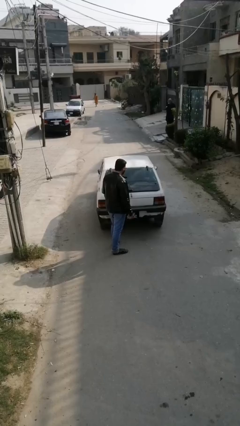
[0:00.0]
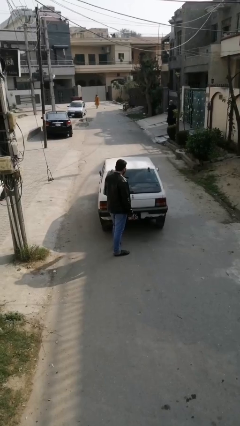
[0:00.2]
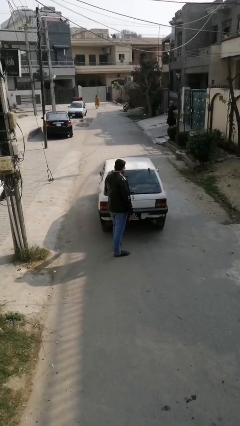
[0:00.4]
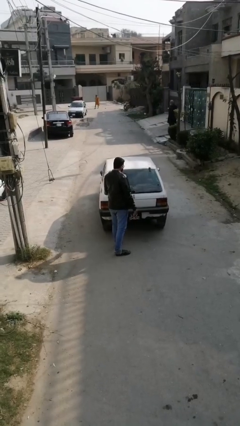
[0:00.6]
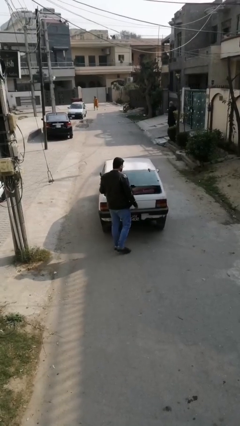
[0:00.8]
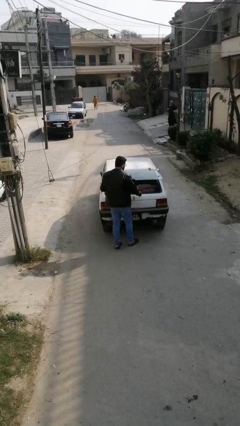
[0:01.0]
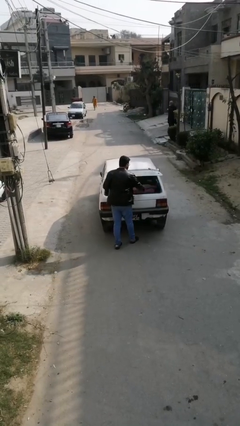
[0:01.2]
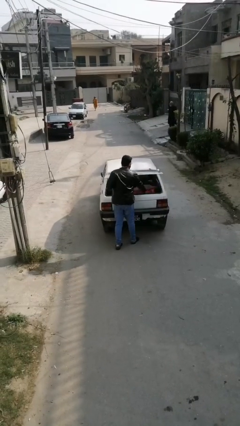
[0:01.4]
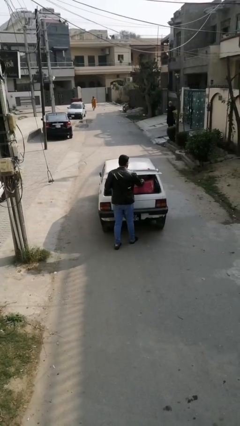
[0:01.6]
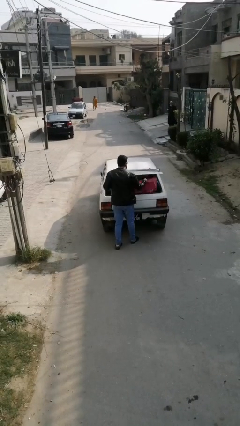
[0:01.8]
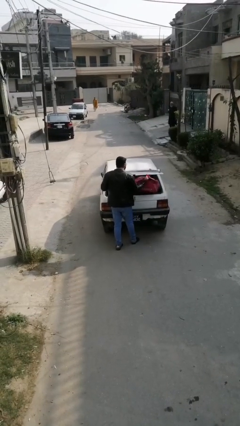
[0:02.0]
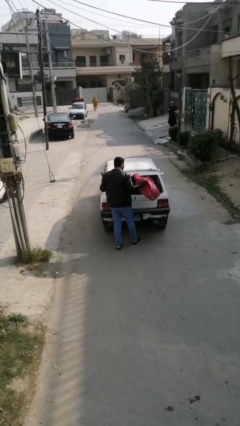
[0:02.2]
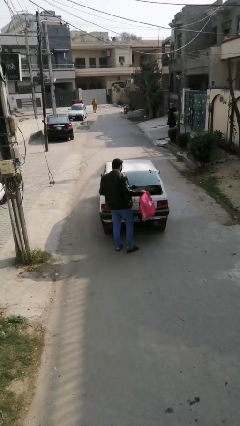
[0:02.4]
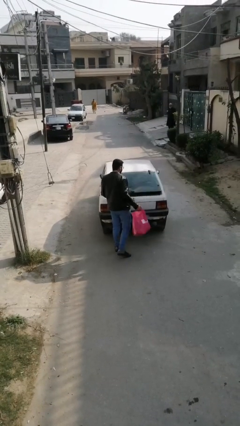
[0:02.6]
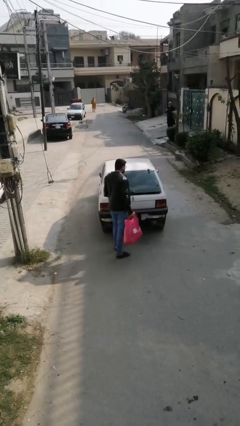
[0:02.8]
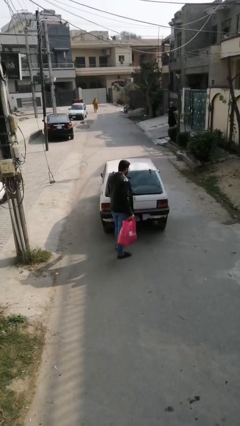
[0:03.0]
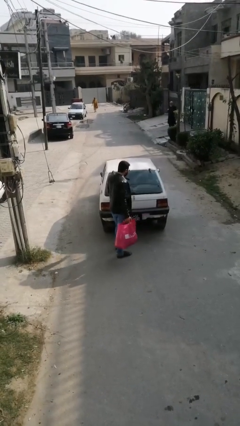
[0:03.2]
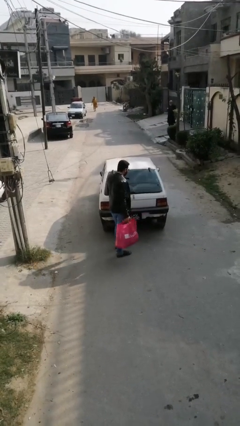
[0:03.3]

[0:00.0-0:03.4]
person unloads car

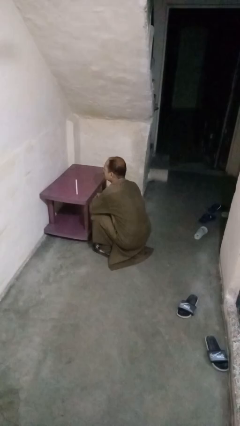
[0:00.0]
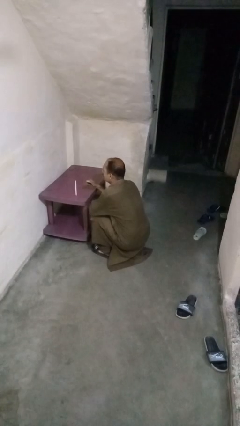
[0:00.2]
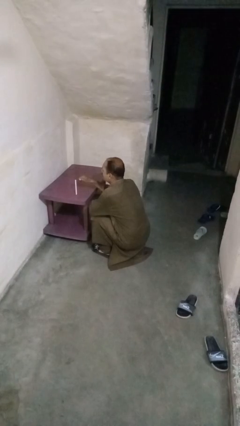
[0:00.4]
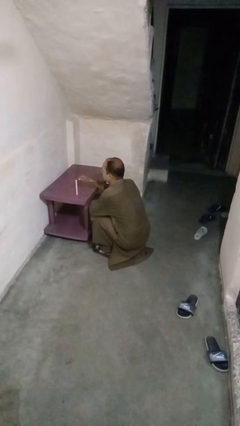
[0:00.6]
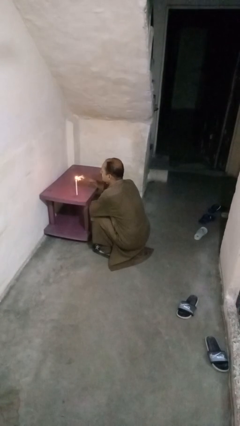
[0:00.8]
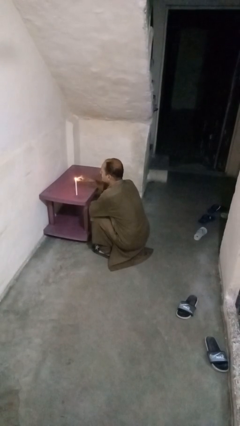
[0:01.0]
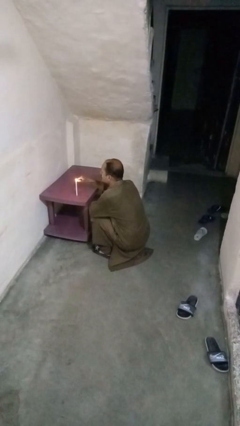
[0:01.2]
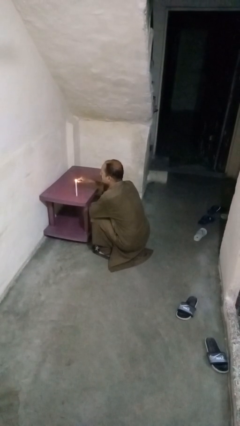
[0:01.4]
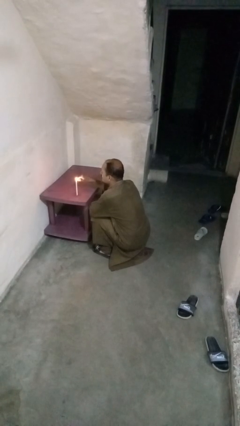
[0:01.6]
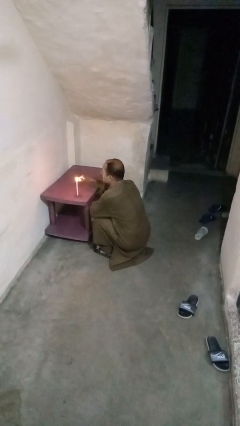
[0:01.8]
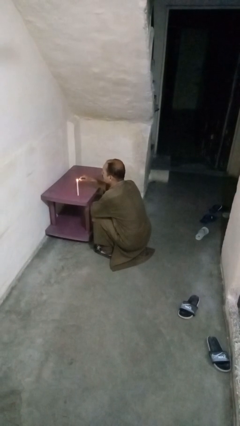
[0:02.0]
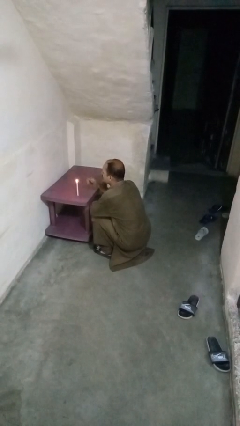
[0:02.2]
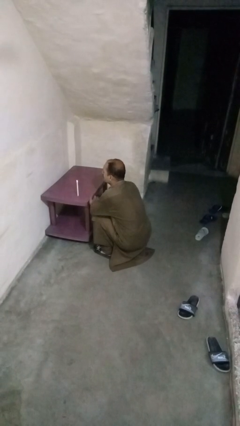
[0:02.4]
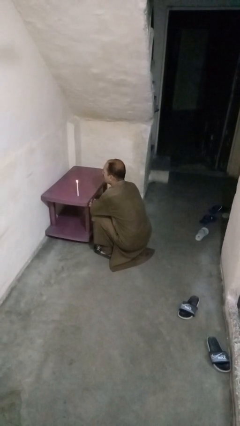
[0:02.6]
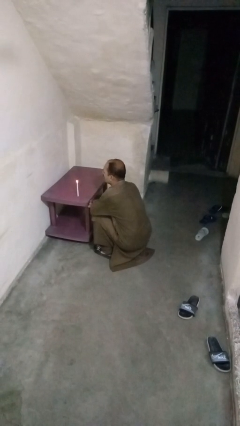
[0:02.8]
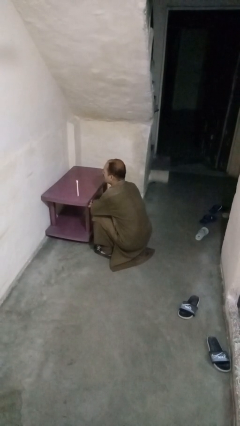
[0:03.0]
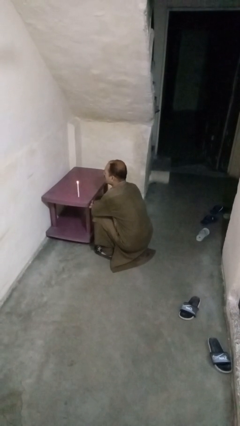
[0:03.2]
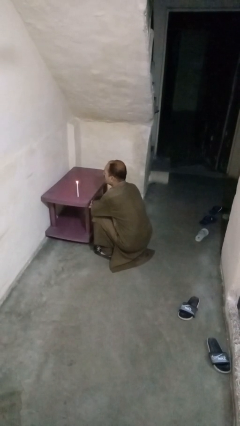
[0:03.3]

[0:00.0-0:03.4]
person lights candle

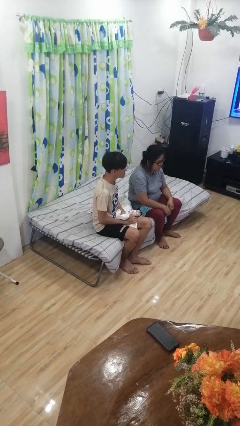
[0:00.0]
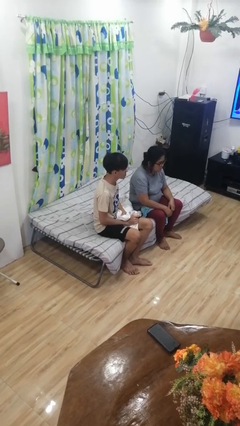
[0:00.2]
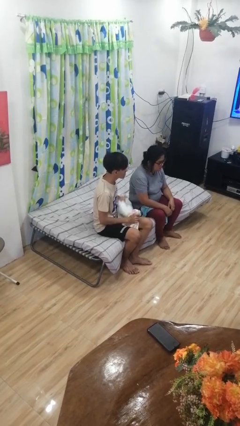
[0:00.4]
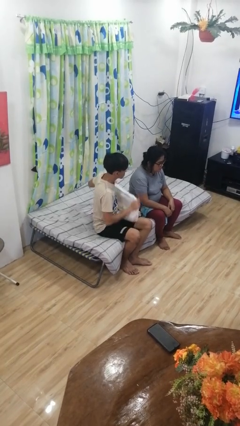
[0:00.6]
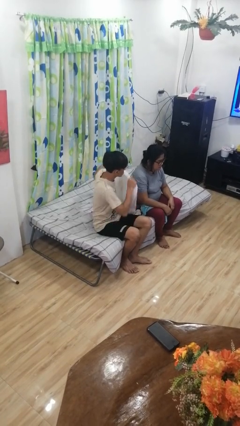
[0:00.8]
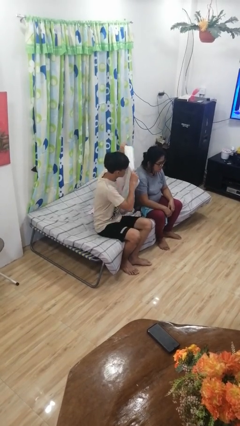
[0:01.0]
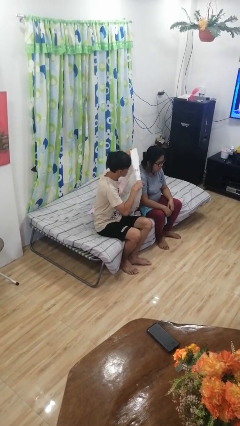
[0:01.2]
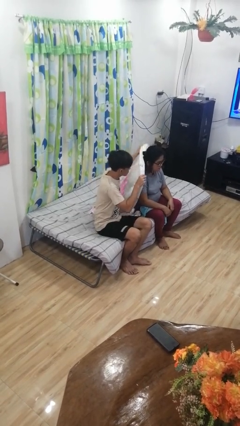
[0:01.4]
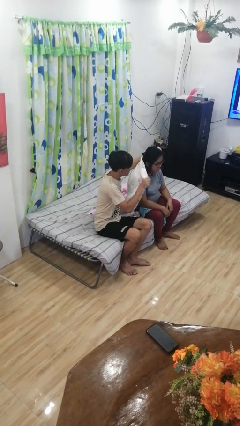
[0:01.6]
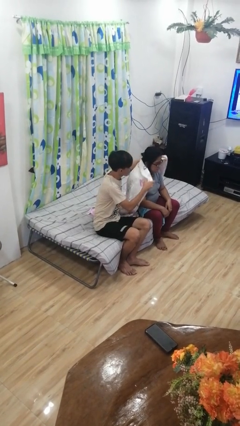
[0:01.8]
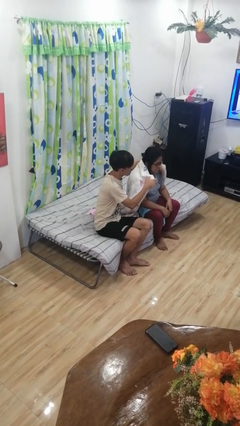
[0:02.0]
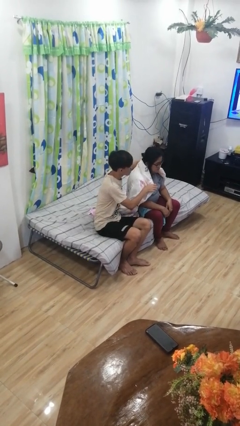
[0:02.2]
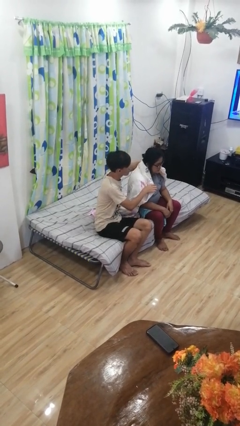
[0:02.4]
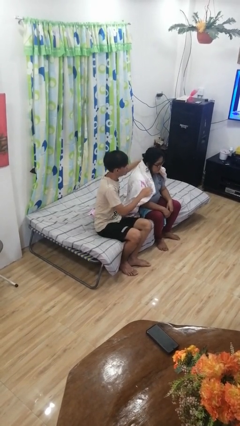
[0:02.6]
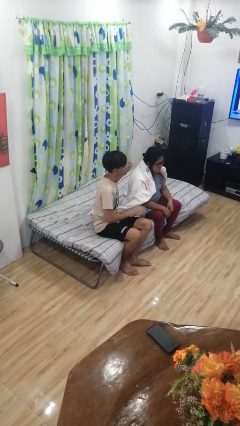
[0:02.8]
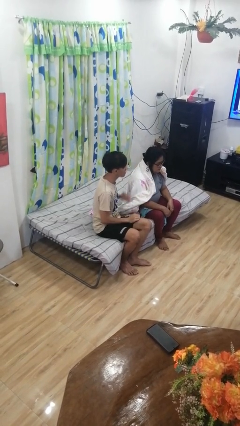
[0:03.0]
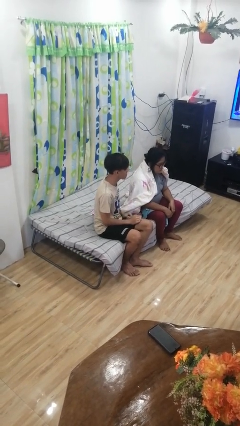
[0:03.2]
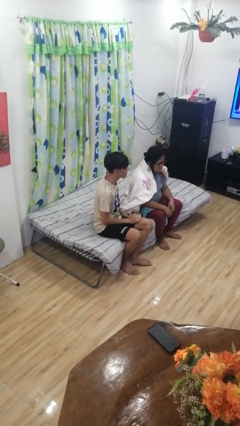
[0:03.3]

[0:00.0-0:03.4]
person covers friend with blanket

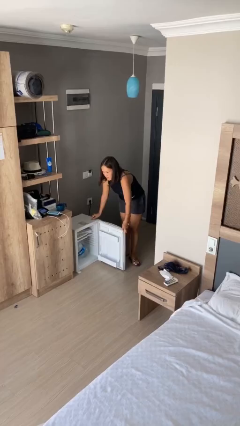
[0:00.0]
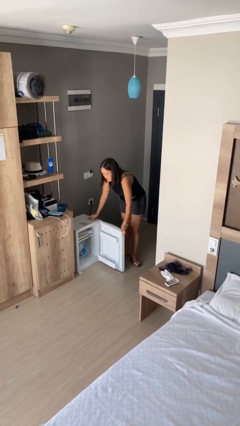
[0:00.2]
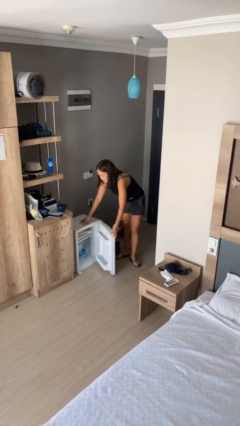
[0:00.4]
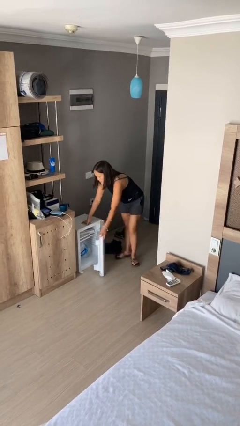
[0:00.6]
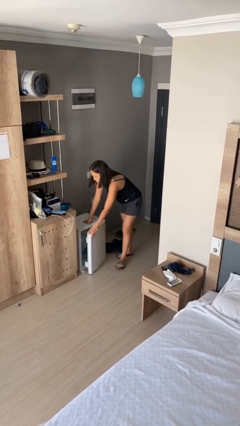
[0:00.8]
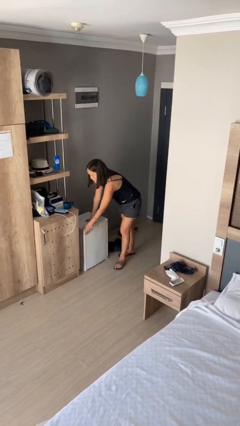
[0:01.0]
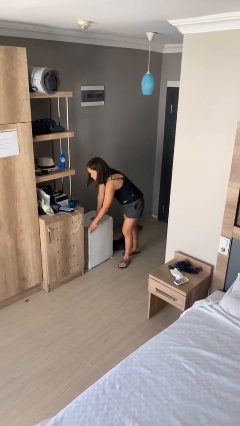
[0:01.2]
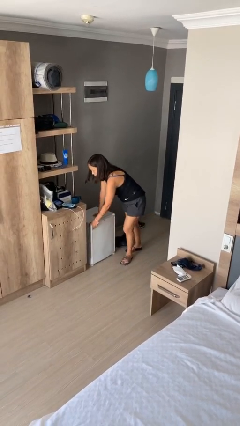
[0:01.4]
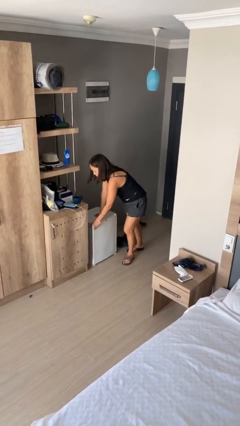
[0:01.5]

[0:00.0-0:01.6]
person closes refrigerator

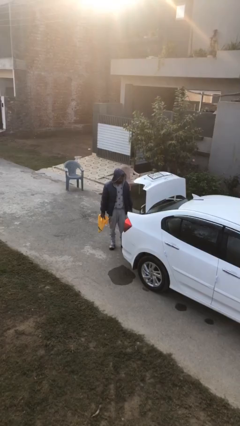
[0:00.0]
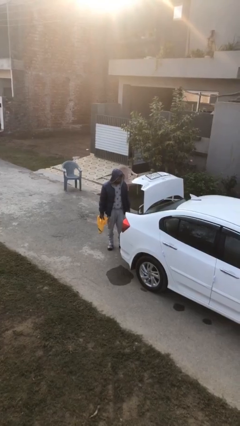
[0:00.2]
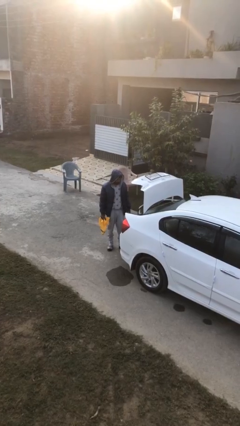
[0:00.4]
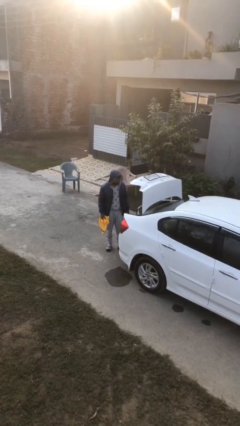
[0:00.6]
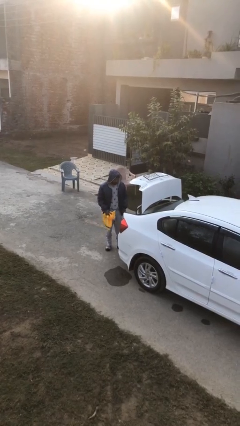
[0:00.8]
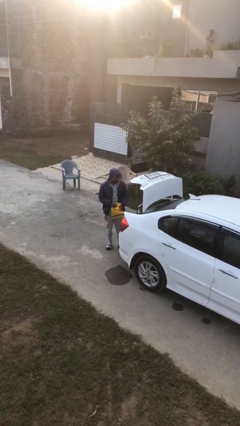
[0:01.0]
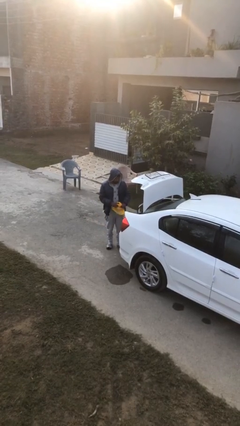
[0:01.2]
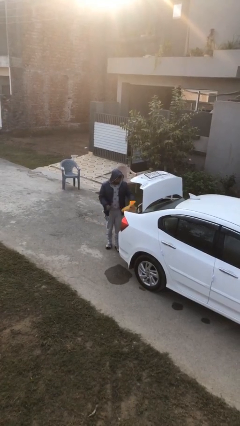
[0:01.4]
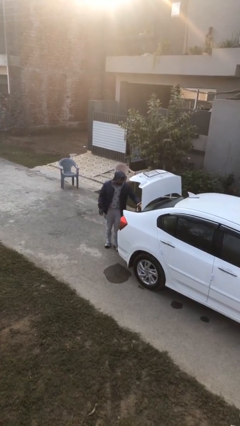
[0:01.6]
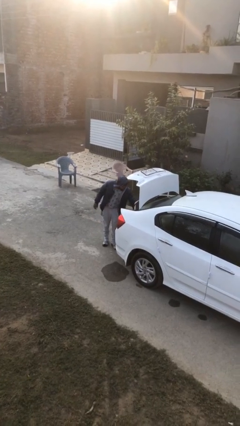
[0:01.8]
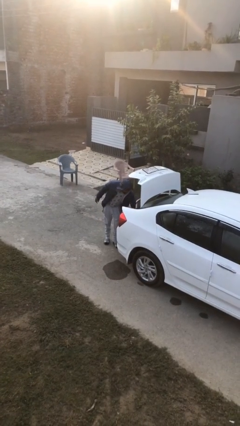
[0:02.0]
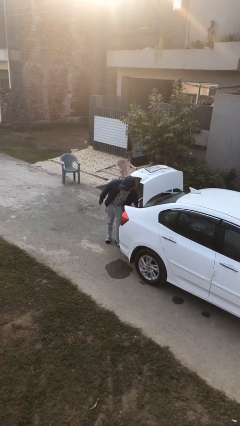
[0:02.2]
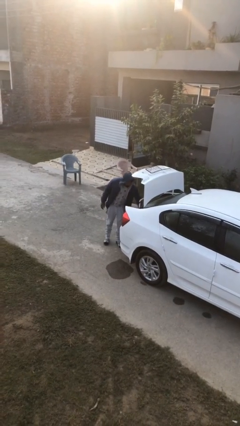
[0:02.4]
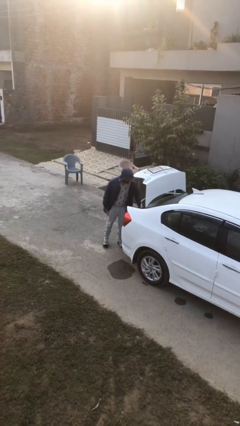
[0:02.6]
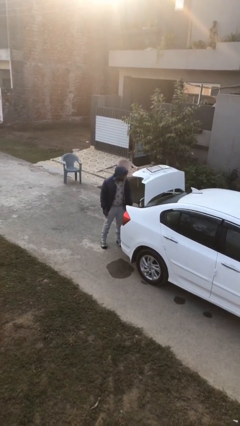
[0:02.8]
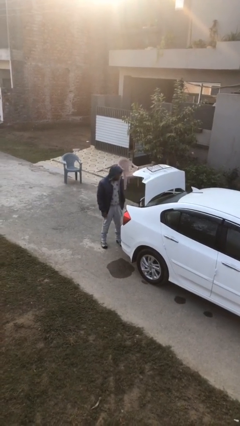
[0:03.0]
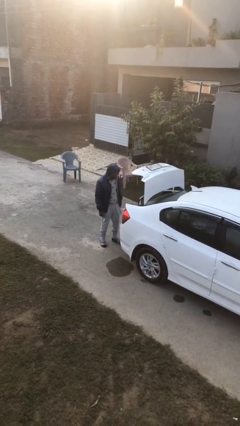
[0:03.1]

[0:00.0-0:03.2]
person loads car

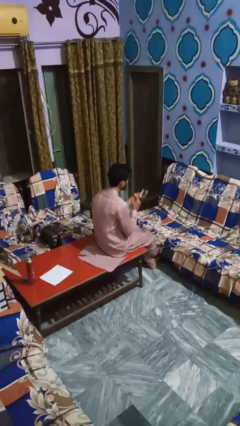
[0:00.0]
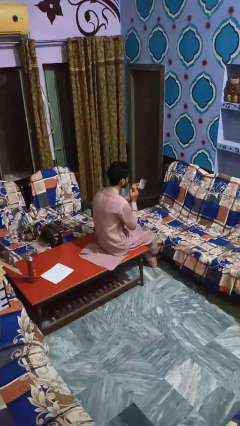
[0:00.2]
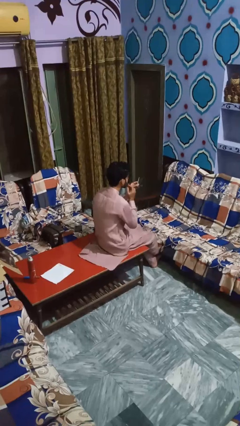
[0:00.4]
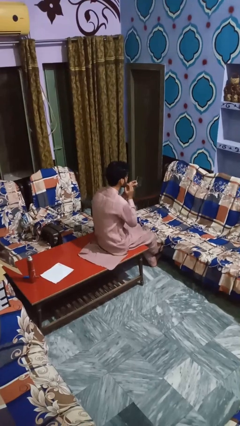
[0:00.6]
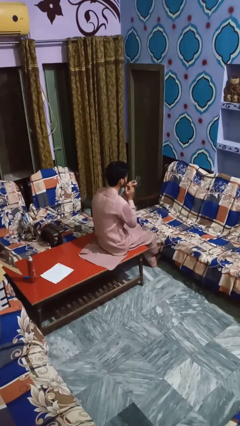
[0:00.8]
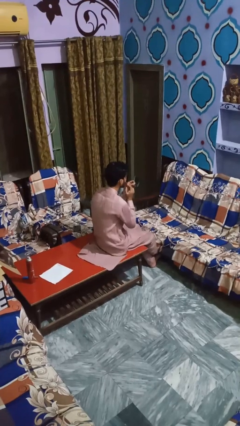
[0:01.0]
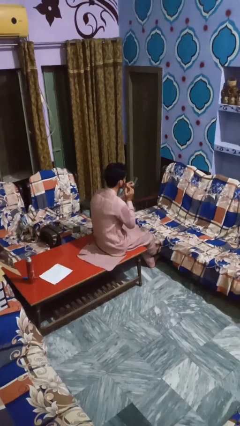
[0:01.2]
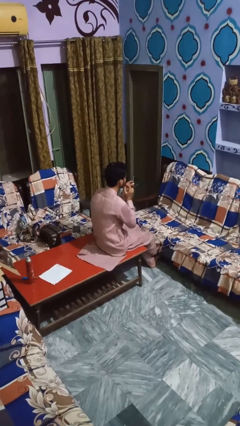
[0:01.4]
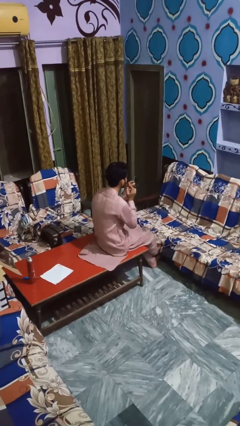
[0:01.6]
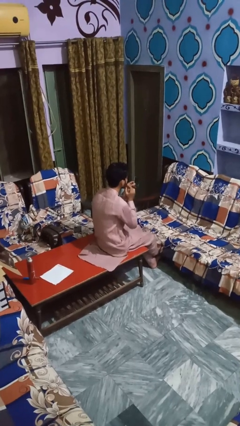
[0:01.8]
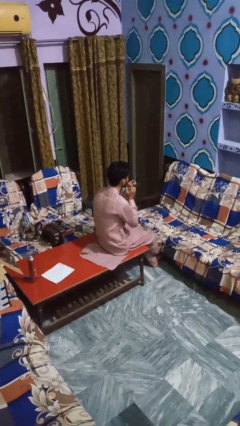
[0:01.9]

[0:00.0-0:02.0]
person applies lip makeup
